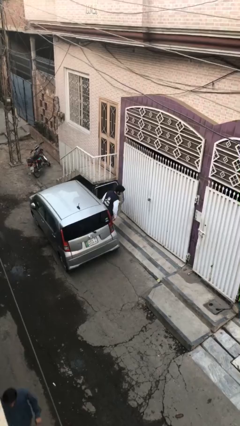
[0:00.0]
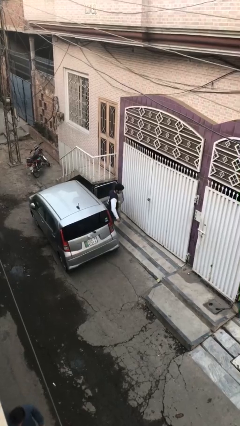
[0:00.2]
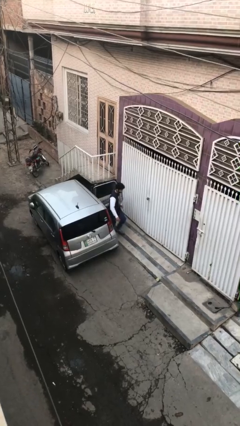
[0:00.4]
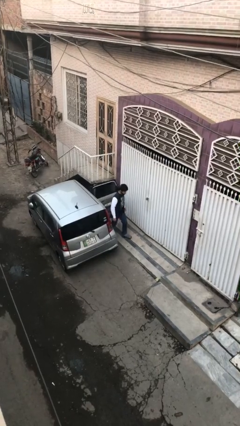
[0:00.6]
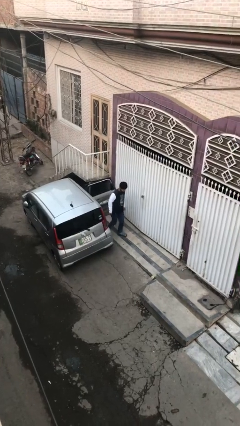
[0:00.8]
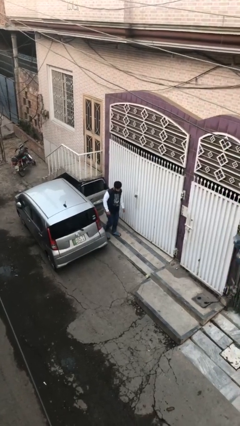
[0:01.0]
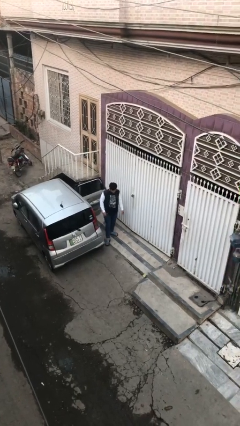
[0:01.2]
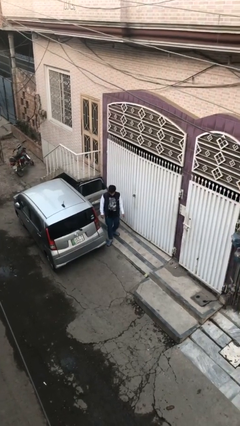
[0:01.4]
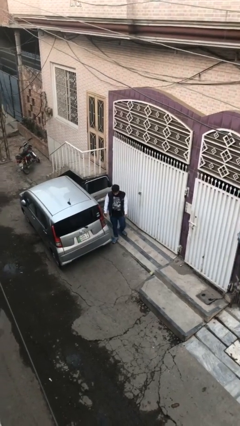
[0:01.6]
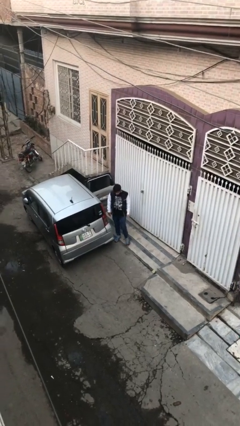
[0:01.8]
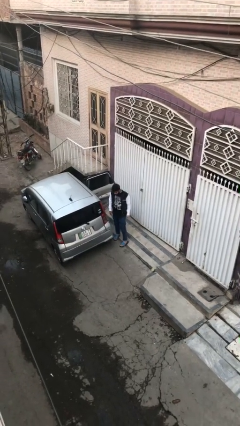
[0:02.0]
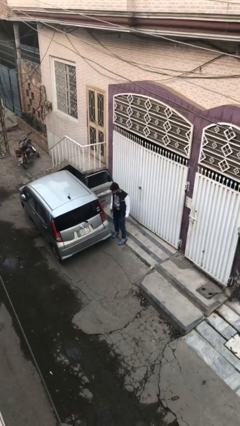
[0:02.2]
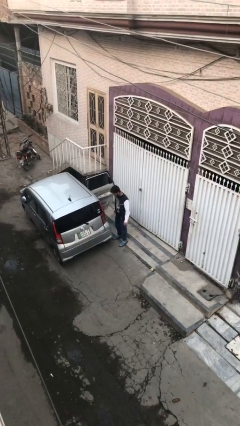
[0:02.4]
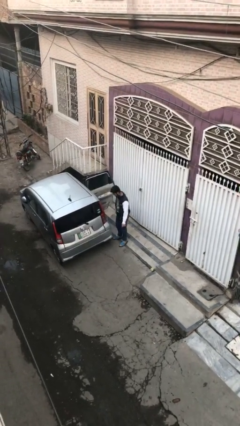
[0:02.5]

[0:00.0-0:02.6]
person exits car

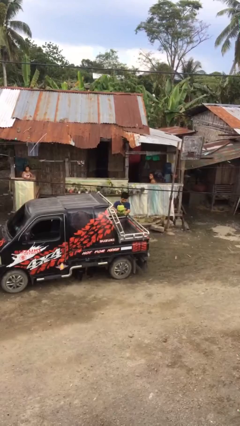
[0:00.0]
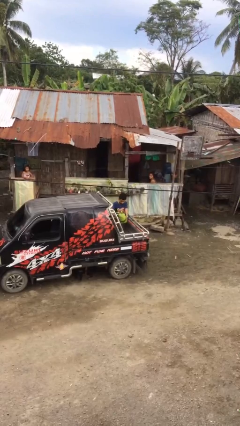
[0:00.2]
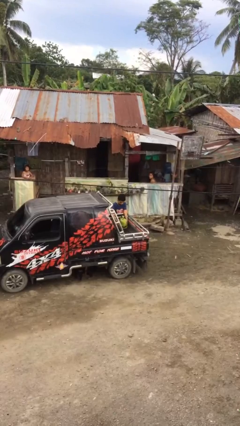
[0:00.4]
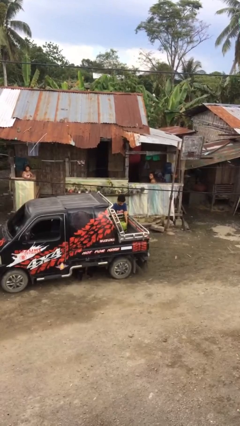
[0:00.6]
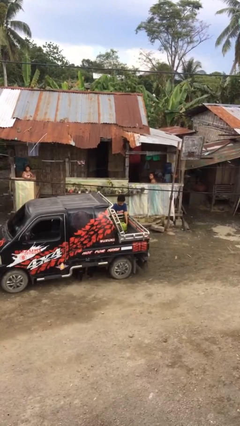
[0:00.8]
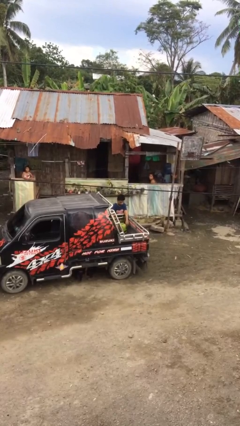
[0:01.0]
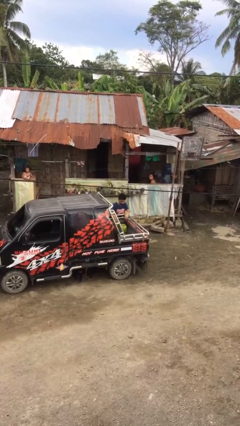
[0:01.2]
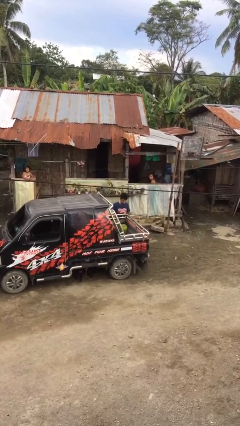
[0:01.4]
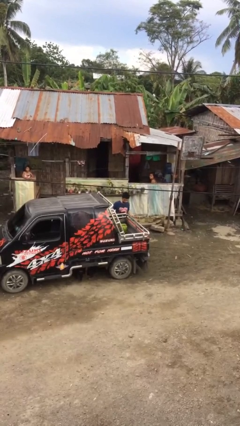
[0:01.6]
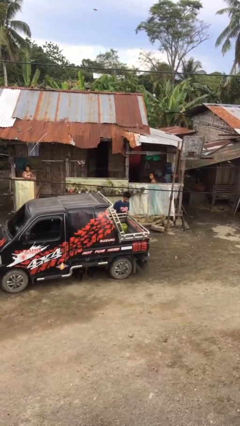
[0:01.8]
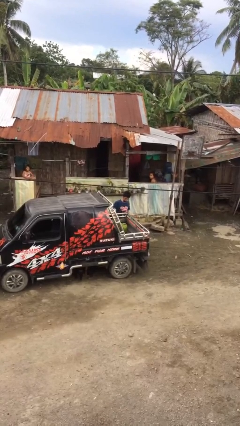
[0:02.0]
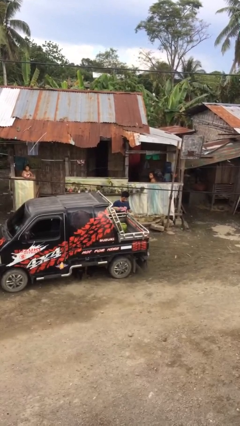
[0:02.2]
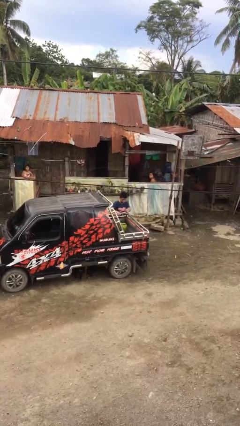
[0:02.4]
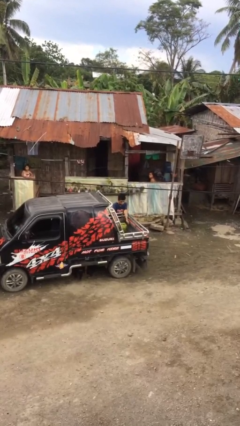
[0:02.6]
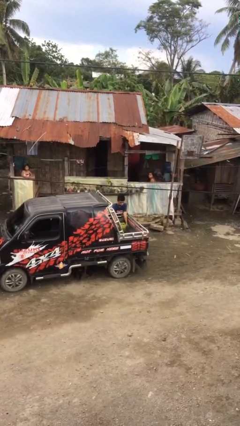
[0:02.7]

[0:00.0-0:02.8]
person loads car

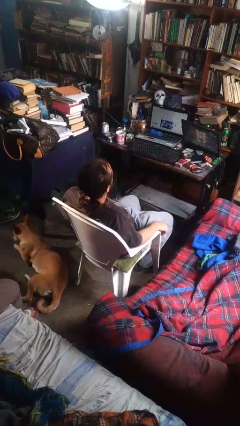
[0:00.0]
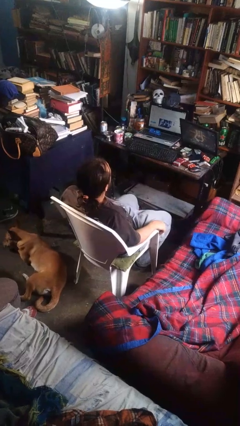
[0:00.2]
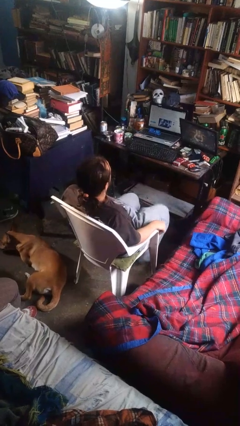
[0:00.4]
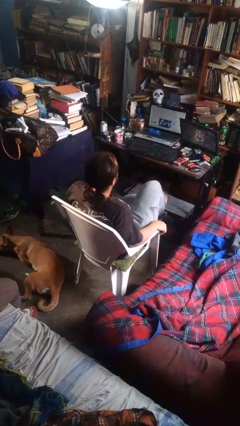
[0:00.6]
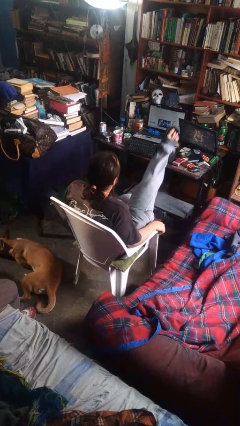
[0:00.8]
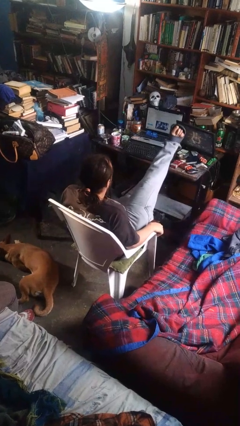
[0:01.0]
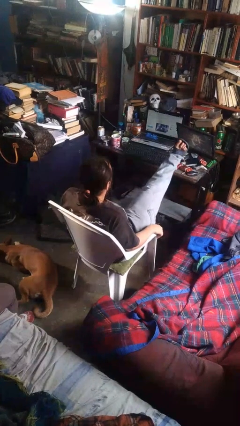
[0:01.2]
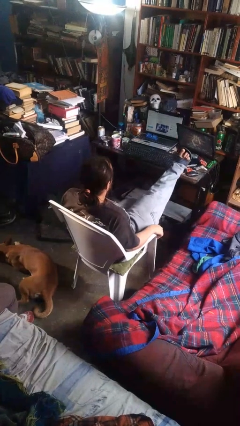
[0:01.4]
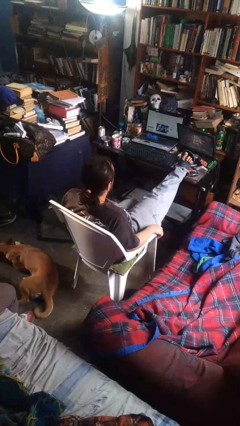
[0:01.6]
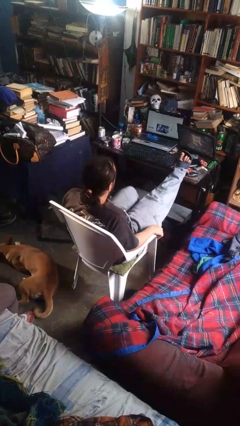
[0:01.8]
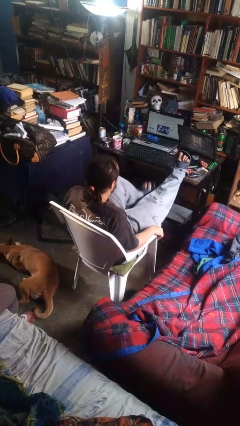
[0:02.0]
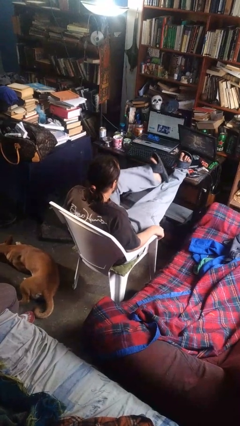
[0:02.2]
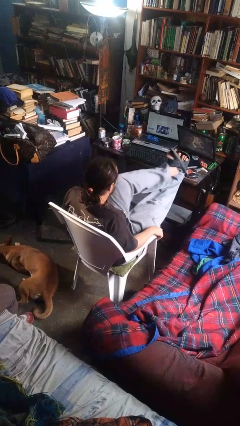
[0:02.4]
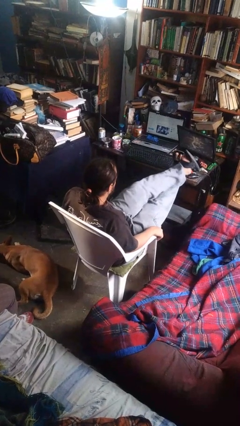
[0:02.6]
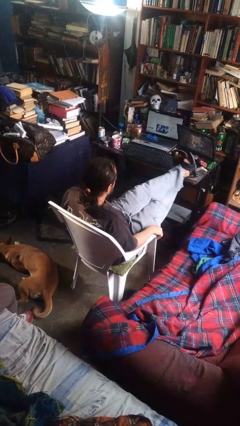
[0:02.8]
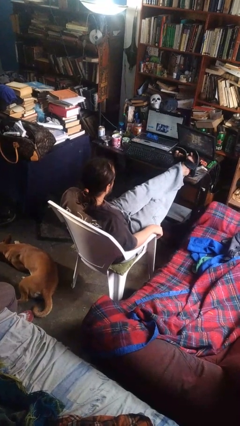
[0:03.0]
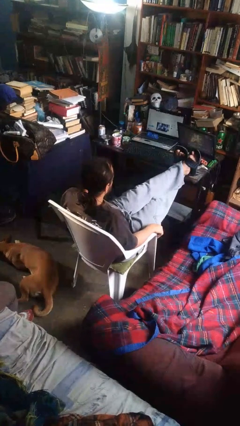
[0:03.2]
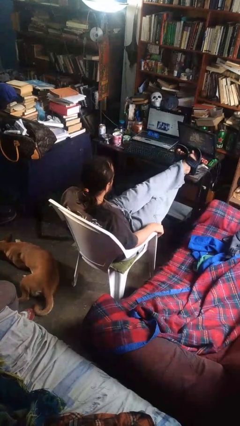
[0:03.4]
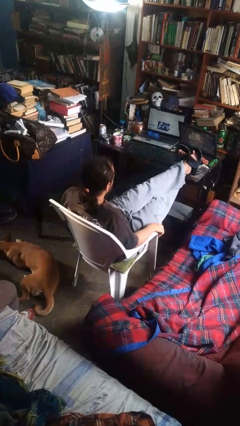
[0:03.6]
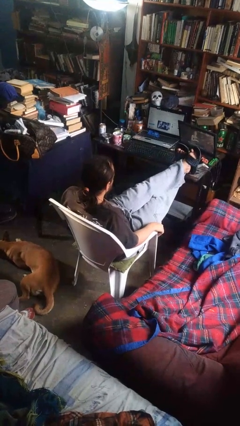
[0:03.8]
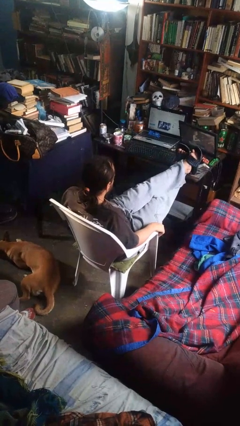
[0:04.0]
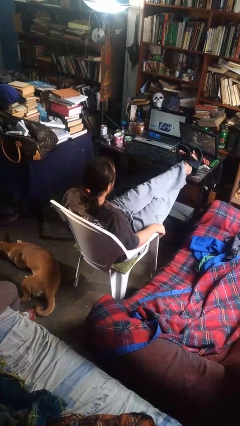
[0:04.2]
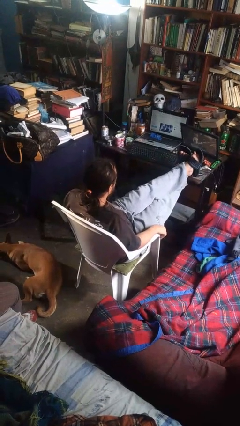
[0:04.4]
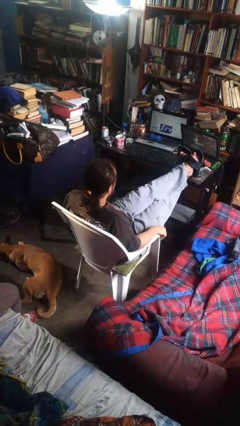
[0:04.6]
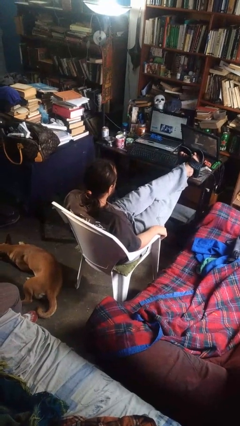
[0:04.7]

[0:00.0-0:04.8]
person puts feet up

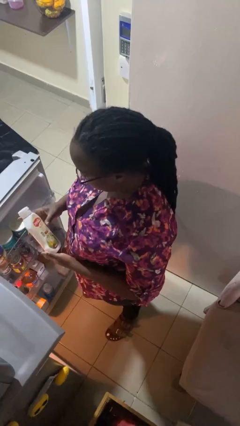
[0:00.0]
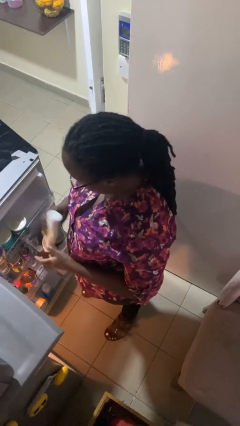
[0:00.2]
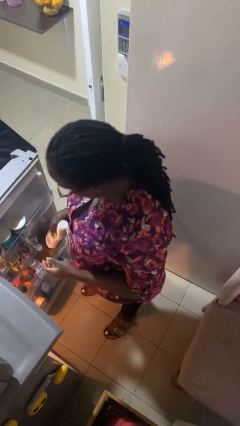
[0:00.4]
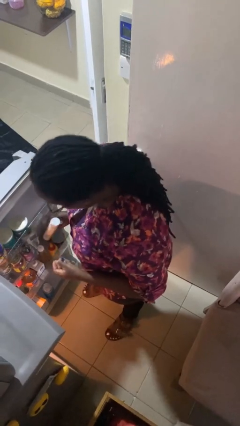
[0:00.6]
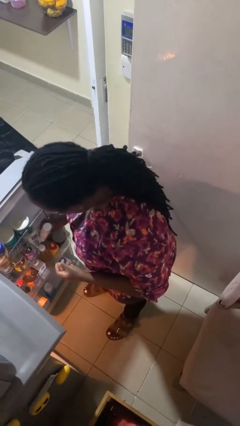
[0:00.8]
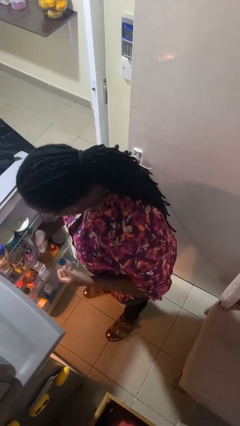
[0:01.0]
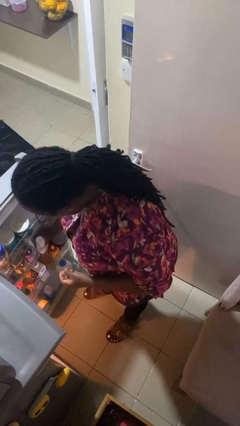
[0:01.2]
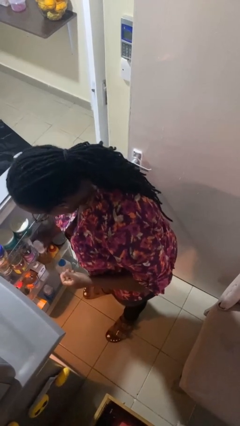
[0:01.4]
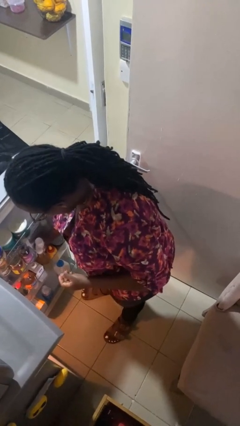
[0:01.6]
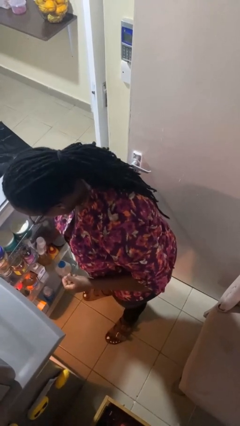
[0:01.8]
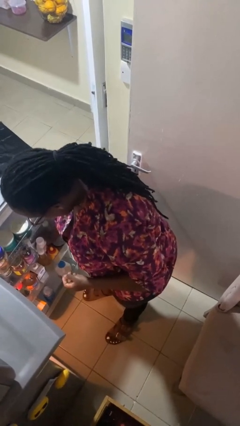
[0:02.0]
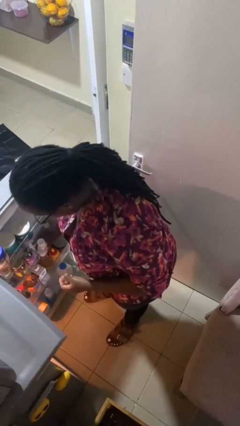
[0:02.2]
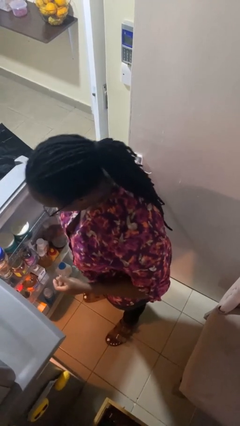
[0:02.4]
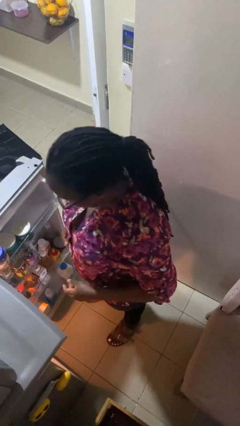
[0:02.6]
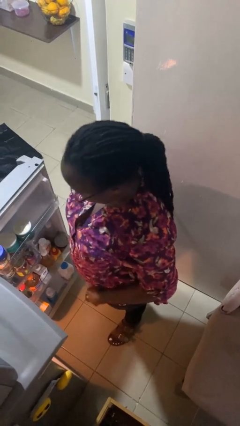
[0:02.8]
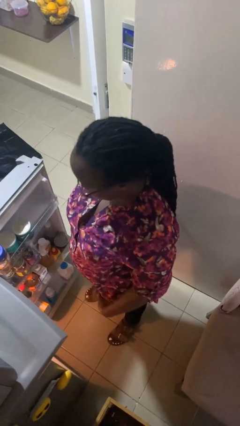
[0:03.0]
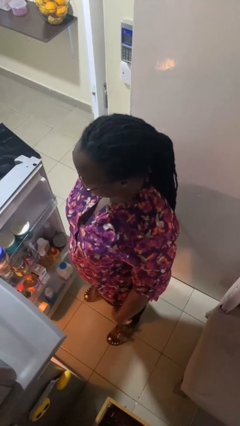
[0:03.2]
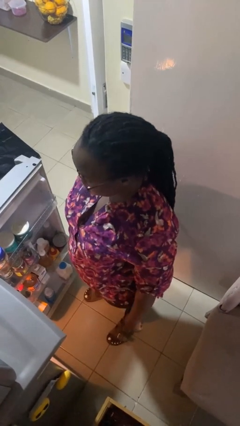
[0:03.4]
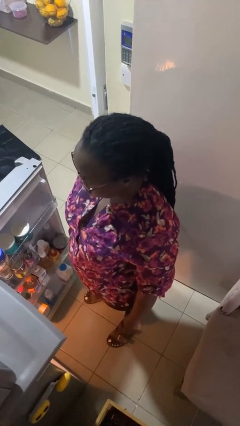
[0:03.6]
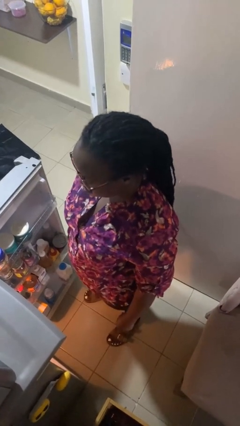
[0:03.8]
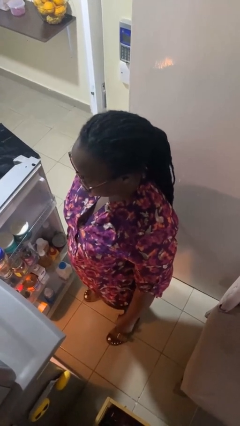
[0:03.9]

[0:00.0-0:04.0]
person puts object into refrigerator

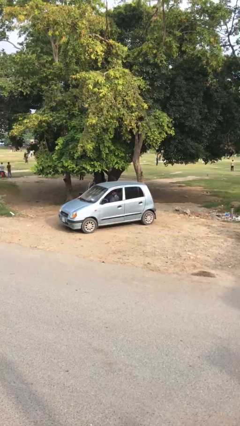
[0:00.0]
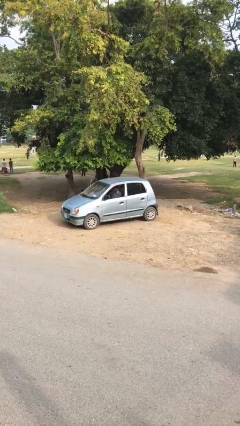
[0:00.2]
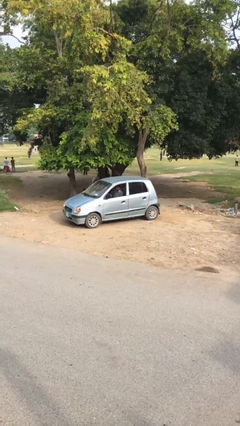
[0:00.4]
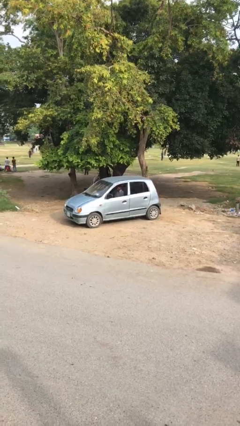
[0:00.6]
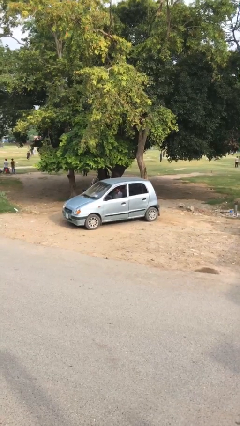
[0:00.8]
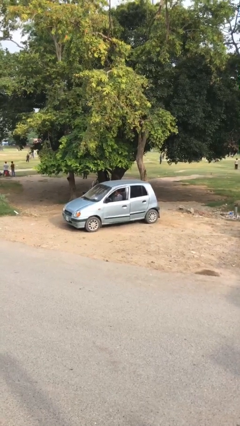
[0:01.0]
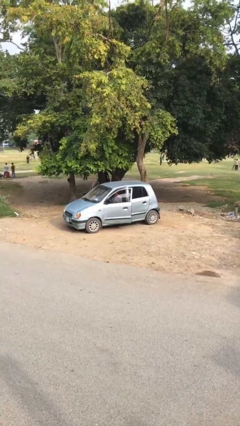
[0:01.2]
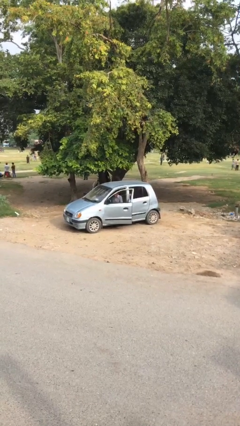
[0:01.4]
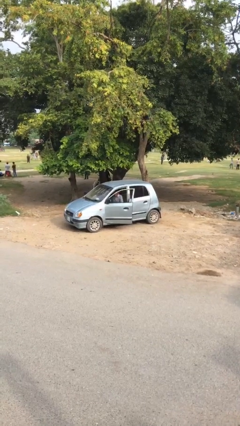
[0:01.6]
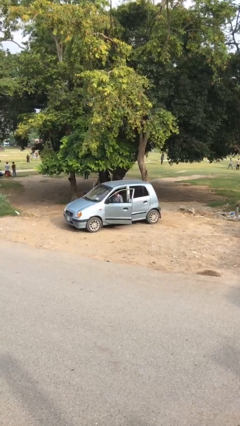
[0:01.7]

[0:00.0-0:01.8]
person opens car door

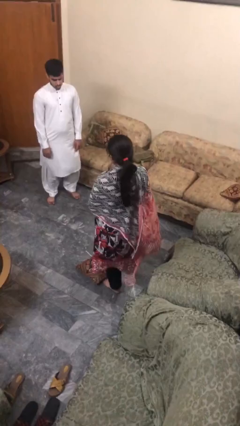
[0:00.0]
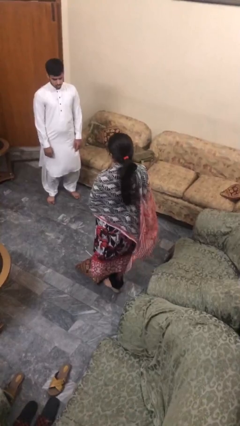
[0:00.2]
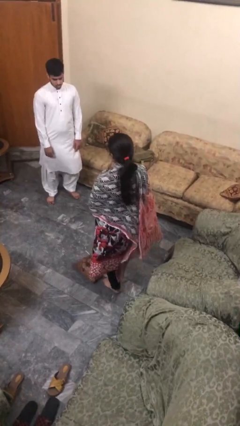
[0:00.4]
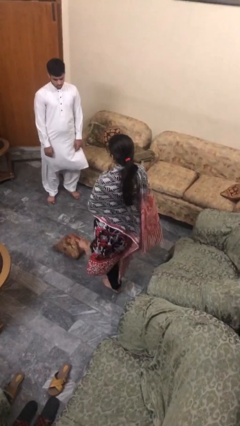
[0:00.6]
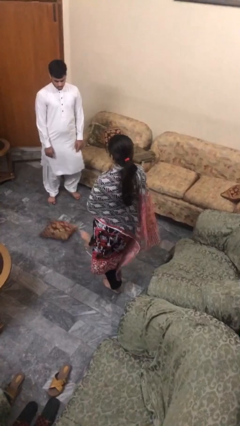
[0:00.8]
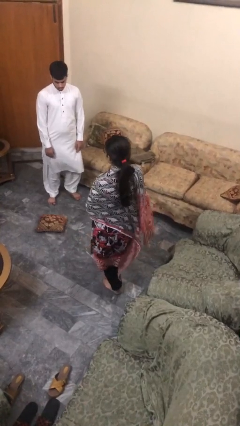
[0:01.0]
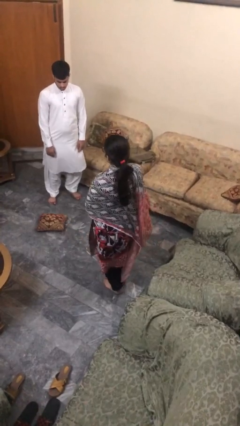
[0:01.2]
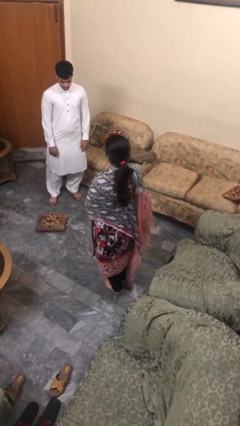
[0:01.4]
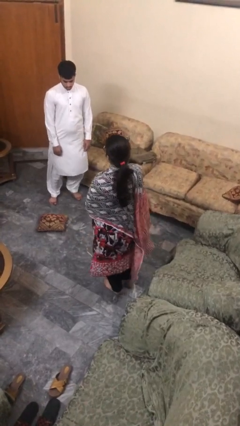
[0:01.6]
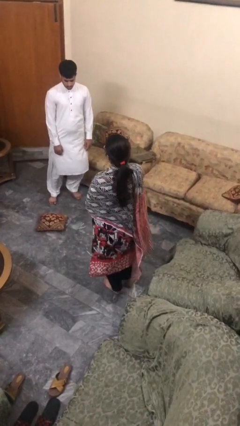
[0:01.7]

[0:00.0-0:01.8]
person kicks object to person
